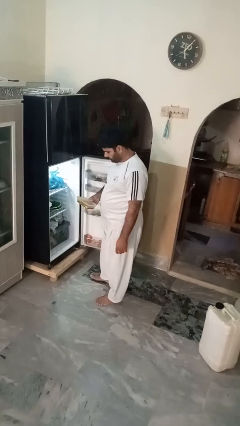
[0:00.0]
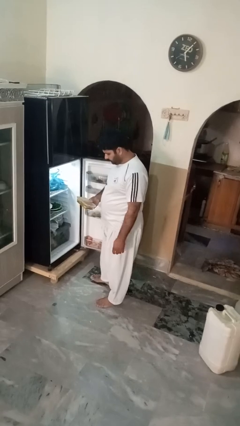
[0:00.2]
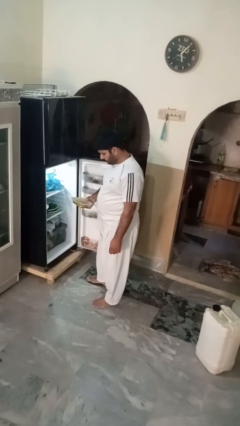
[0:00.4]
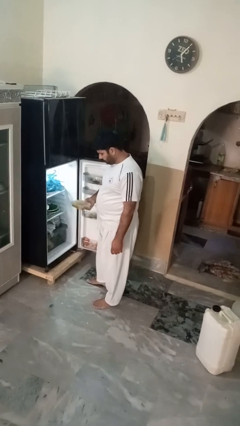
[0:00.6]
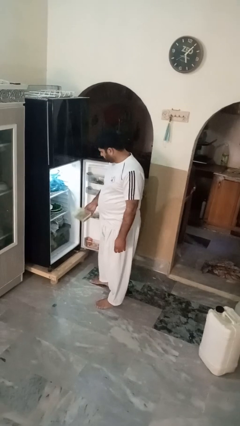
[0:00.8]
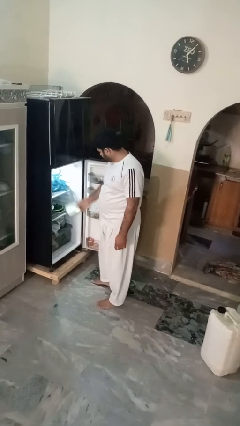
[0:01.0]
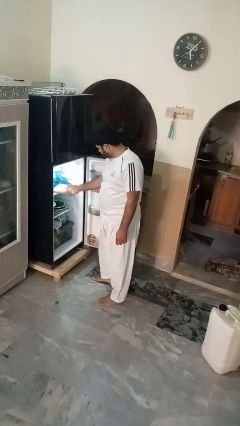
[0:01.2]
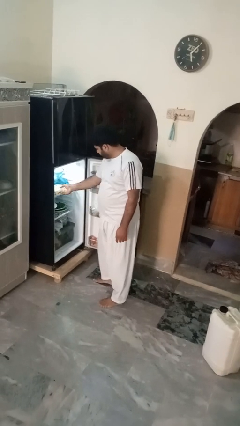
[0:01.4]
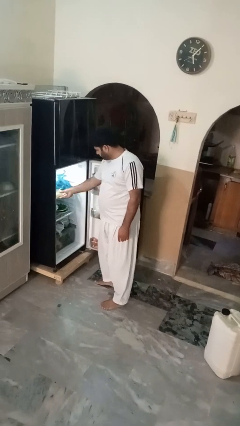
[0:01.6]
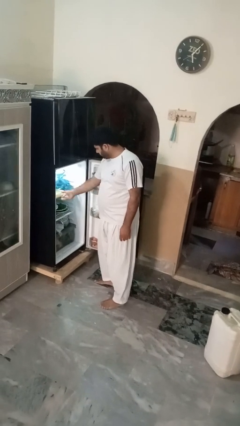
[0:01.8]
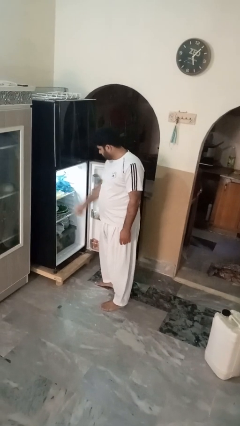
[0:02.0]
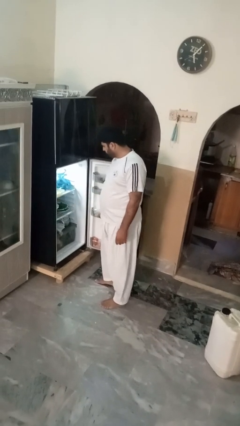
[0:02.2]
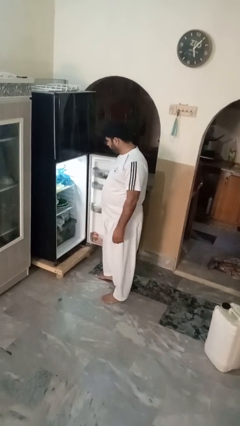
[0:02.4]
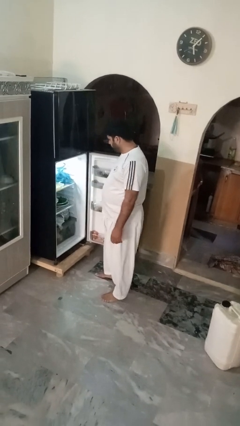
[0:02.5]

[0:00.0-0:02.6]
person puts object into refrigerator

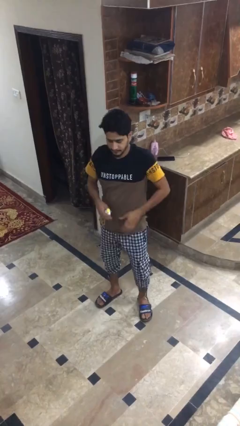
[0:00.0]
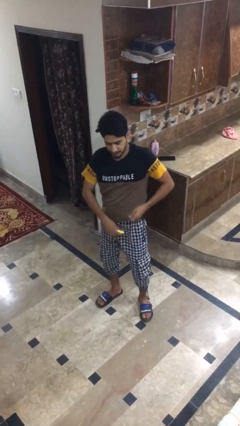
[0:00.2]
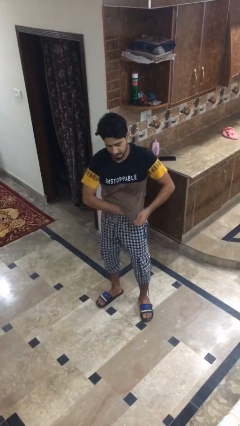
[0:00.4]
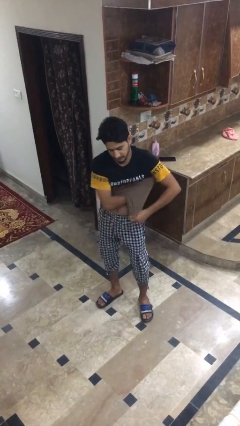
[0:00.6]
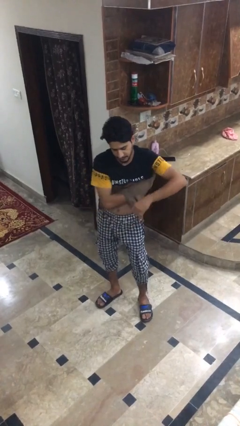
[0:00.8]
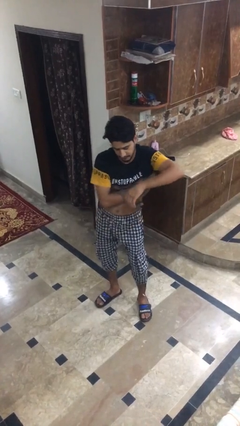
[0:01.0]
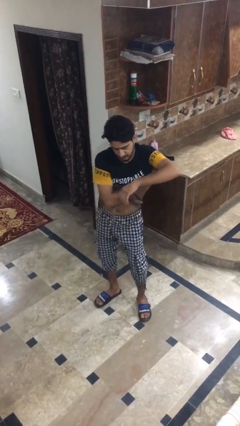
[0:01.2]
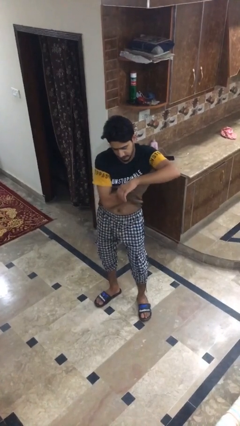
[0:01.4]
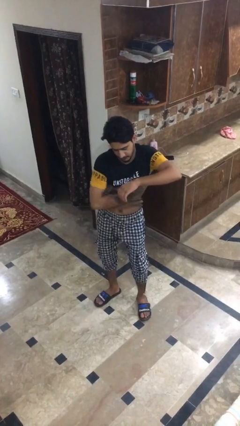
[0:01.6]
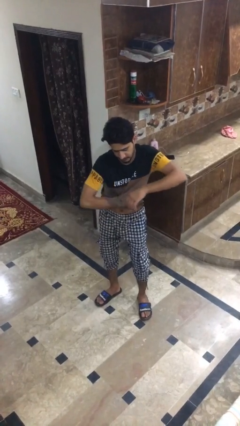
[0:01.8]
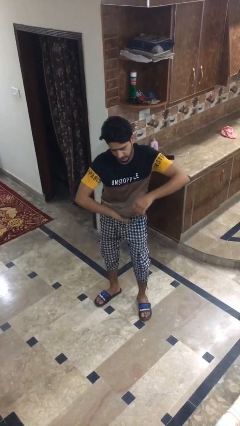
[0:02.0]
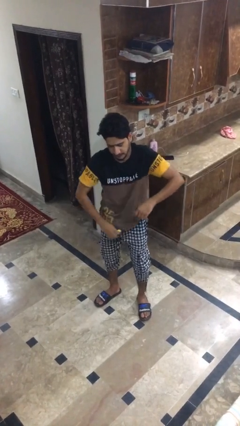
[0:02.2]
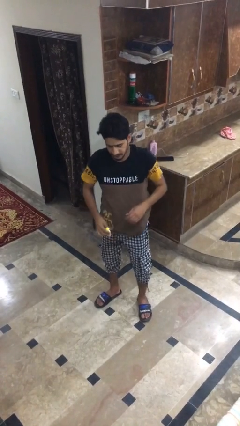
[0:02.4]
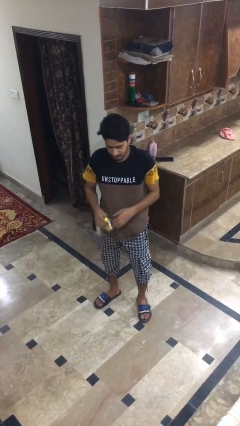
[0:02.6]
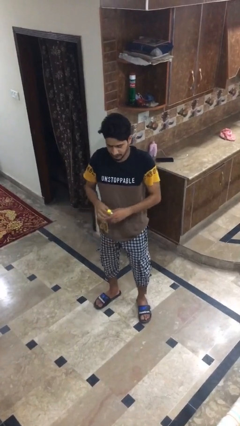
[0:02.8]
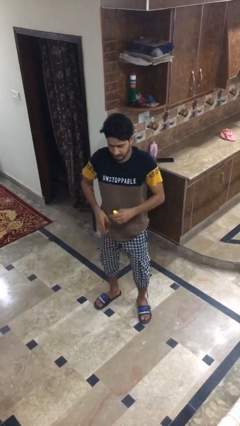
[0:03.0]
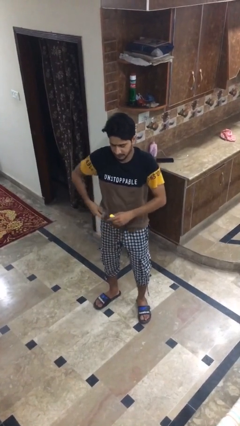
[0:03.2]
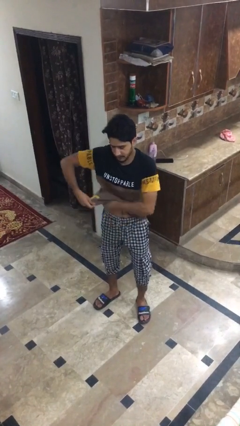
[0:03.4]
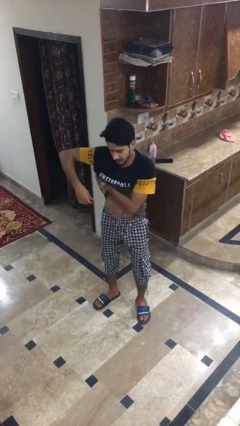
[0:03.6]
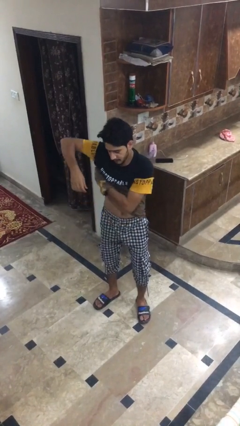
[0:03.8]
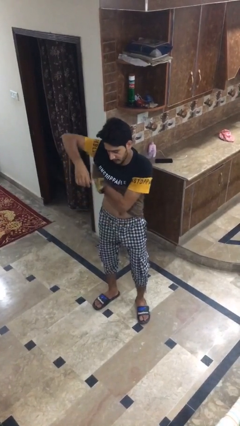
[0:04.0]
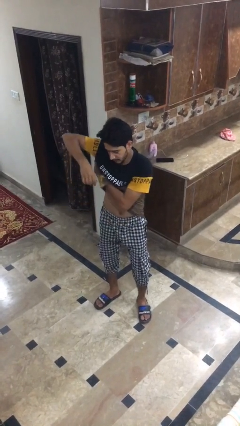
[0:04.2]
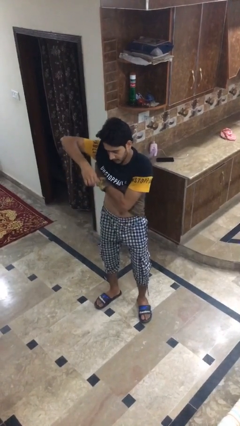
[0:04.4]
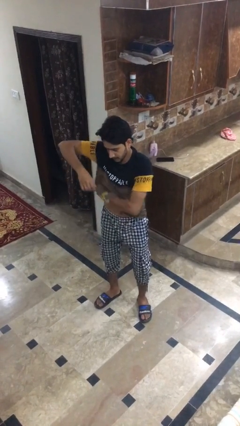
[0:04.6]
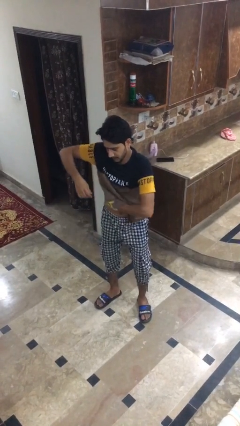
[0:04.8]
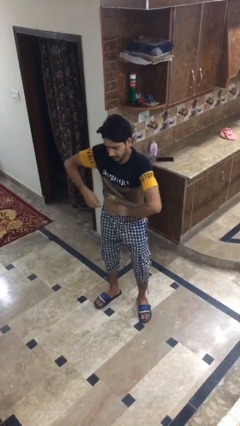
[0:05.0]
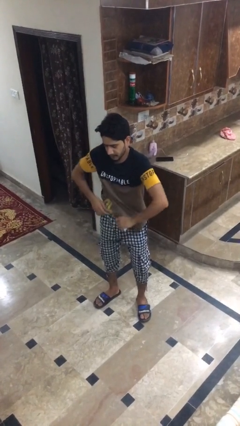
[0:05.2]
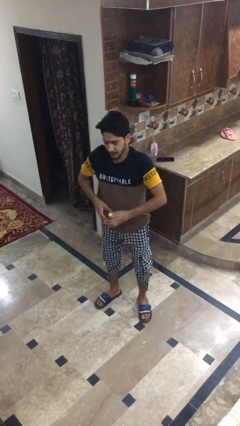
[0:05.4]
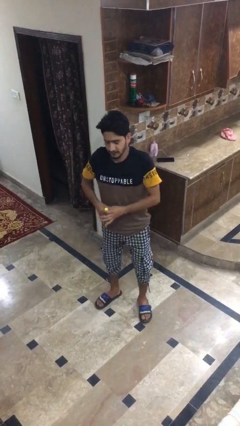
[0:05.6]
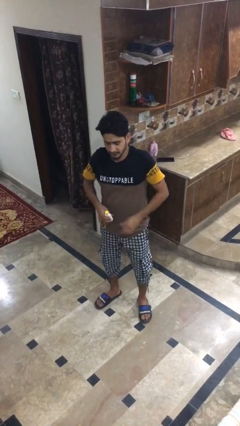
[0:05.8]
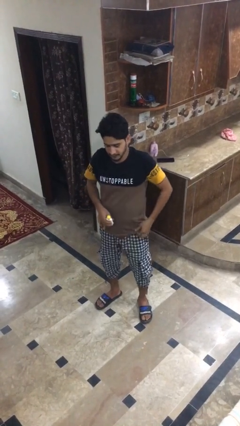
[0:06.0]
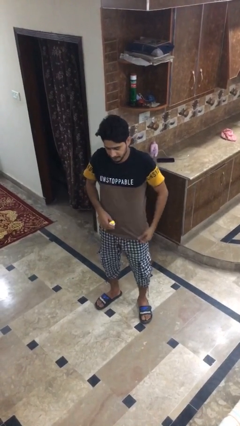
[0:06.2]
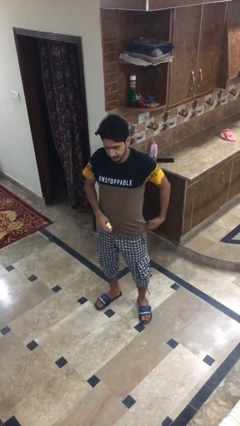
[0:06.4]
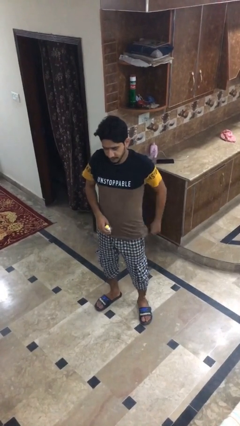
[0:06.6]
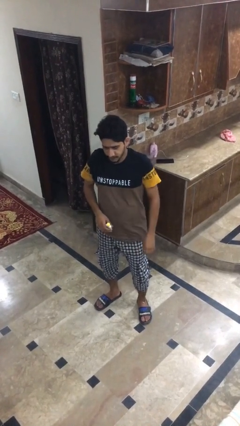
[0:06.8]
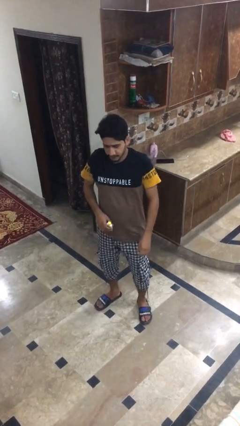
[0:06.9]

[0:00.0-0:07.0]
person applies deodorant

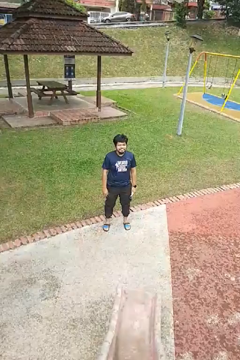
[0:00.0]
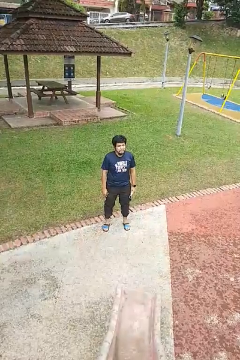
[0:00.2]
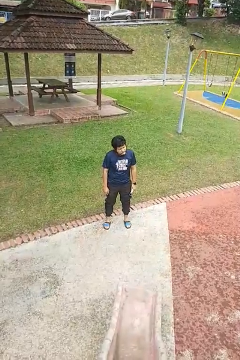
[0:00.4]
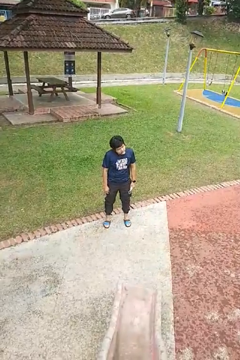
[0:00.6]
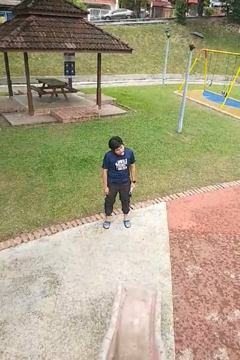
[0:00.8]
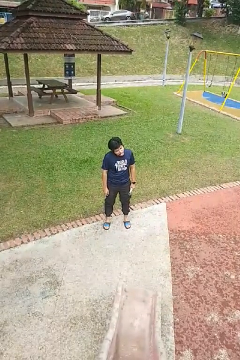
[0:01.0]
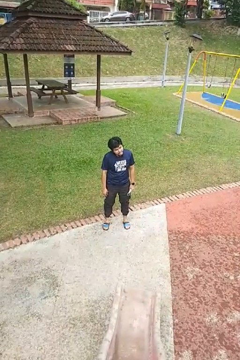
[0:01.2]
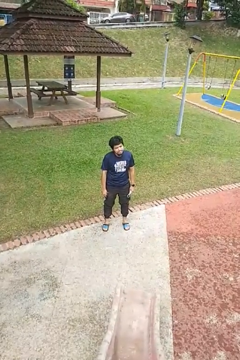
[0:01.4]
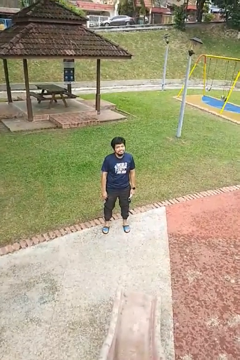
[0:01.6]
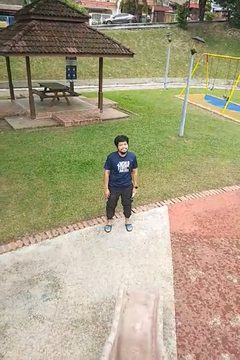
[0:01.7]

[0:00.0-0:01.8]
person sticks out tongue

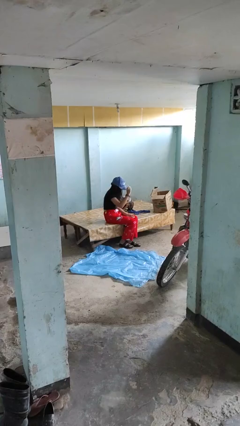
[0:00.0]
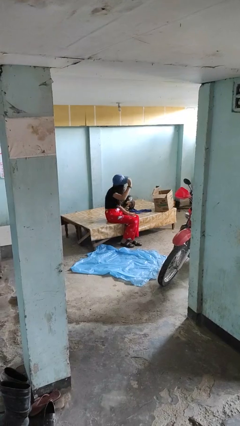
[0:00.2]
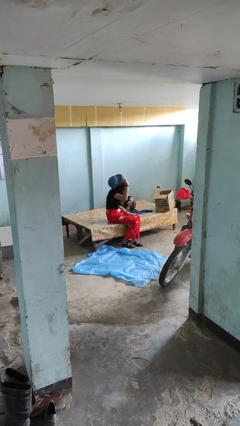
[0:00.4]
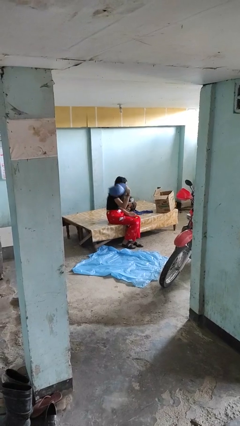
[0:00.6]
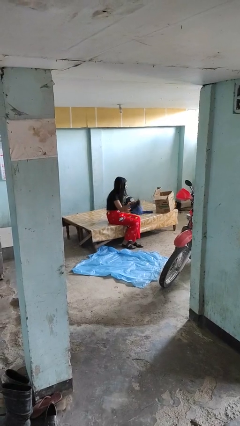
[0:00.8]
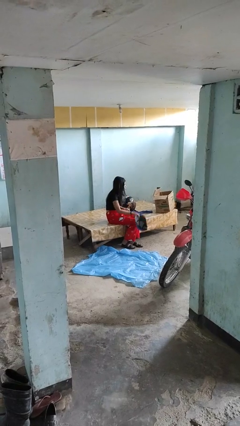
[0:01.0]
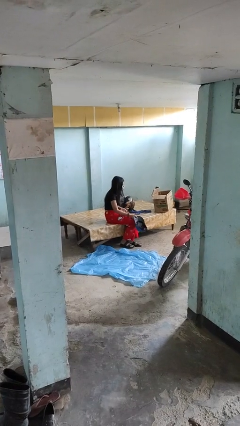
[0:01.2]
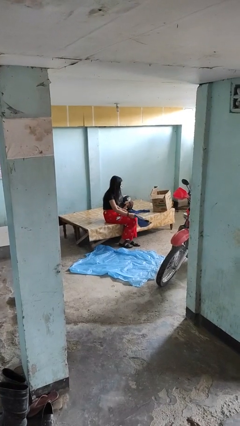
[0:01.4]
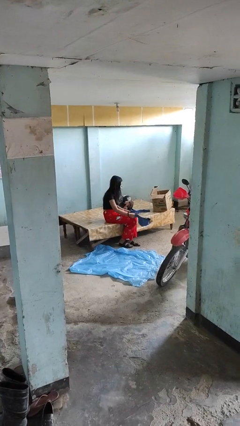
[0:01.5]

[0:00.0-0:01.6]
person takes off hat

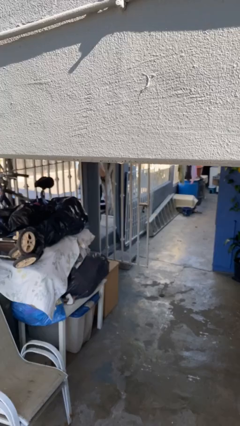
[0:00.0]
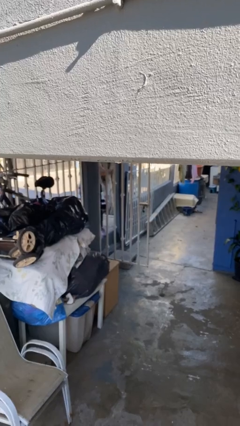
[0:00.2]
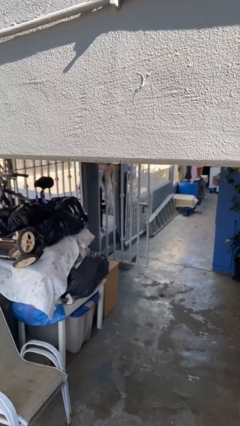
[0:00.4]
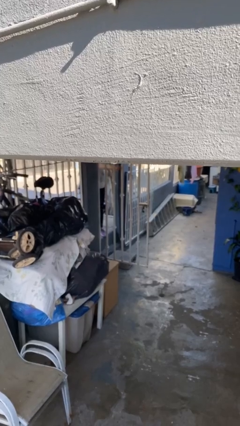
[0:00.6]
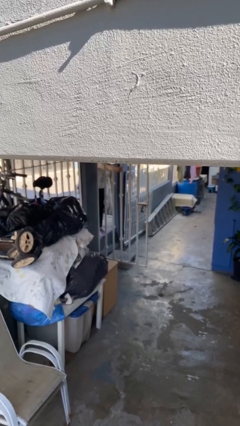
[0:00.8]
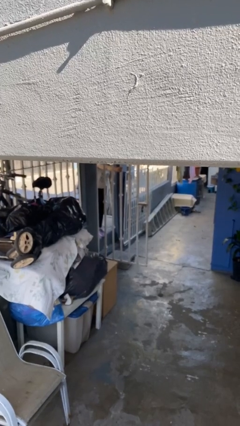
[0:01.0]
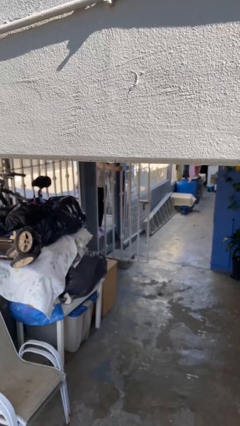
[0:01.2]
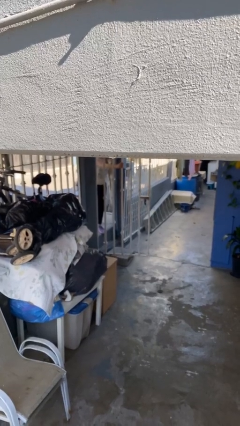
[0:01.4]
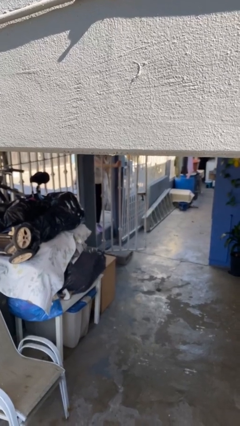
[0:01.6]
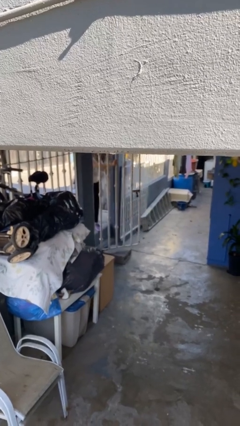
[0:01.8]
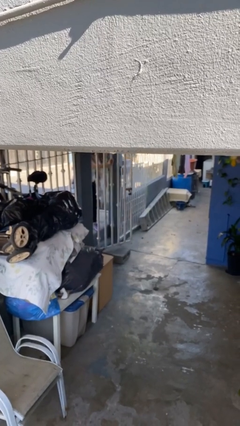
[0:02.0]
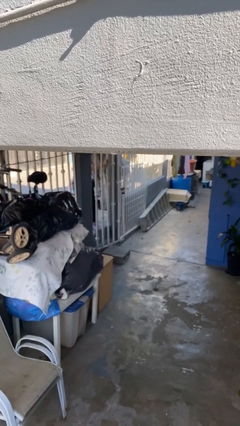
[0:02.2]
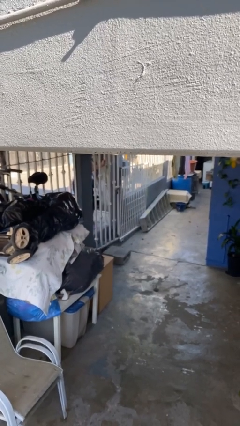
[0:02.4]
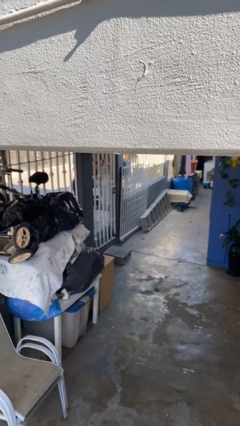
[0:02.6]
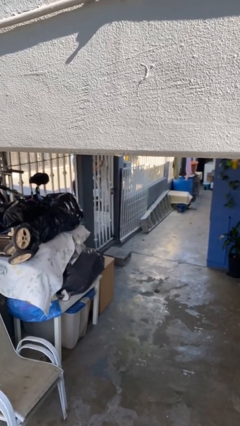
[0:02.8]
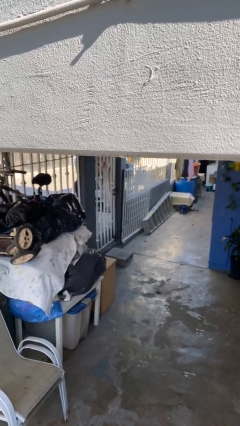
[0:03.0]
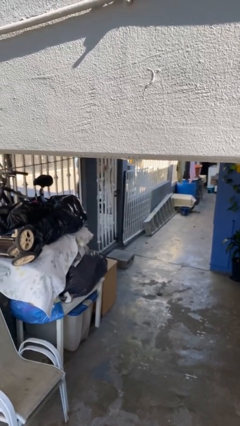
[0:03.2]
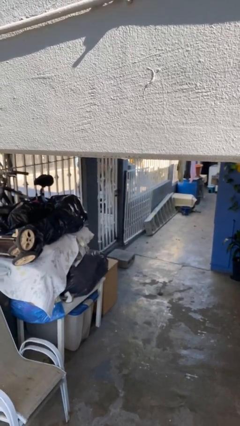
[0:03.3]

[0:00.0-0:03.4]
person closes facility door

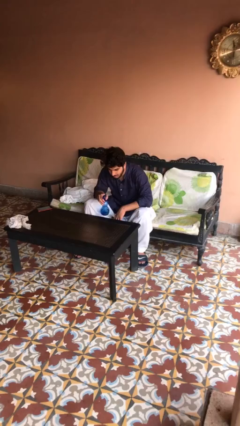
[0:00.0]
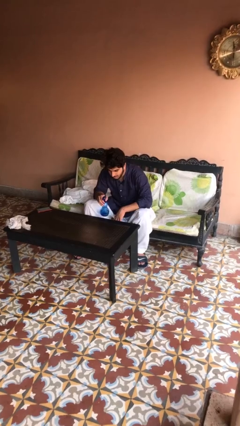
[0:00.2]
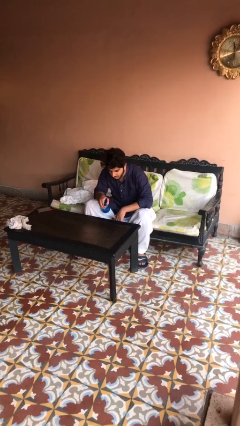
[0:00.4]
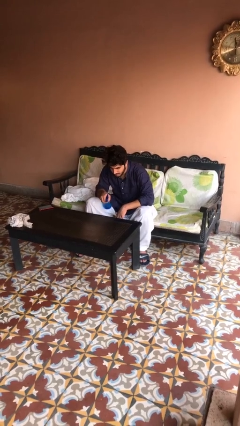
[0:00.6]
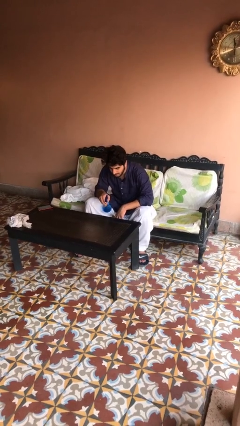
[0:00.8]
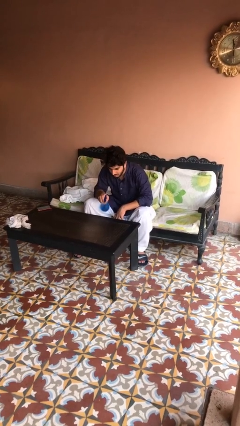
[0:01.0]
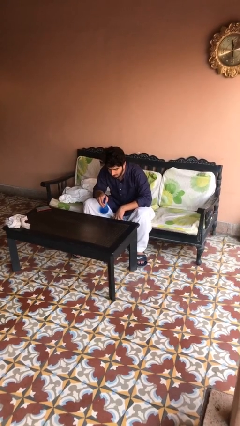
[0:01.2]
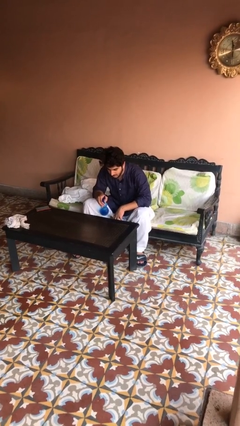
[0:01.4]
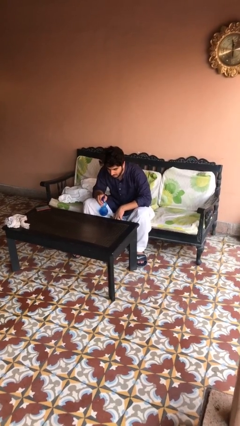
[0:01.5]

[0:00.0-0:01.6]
person sprays from bottle
